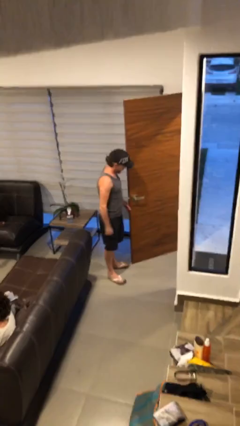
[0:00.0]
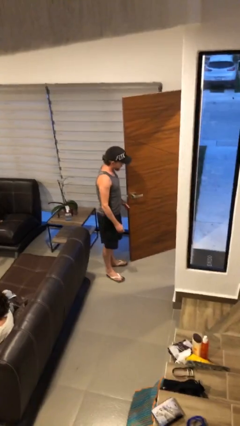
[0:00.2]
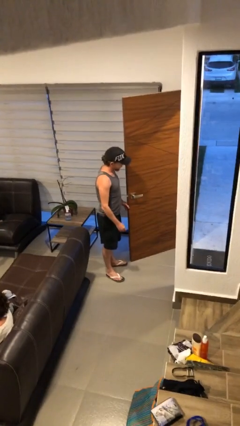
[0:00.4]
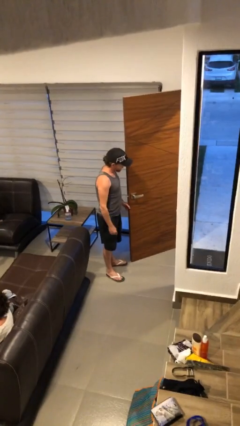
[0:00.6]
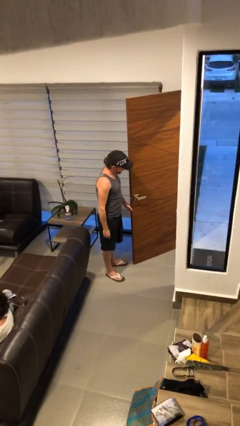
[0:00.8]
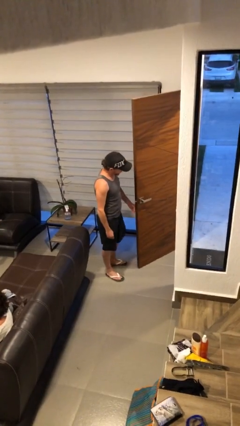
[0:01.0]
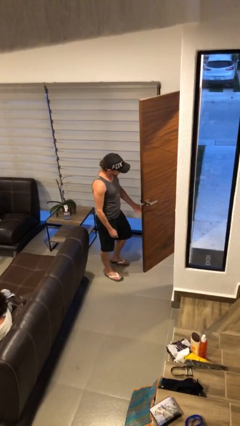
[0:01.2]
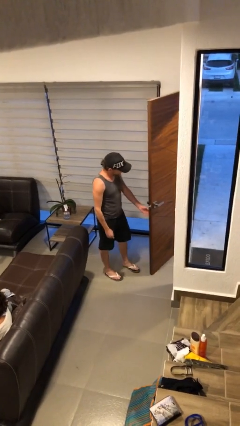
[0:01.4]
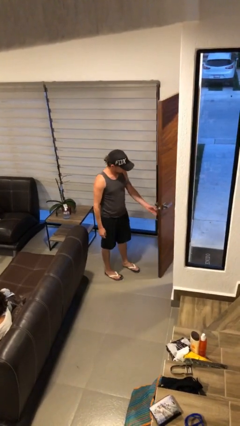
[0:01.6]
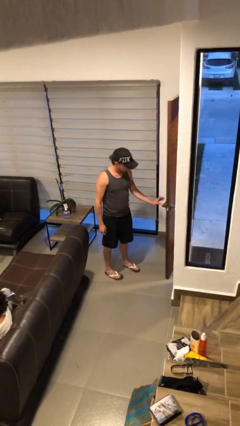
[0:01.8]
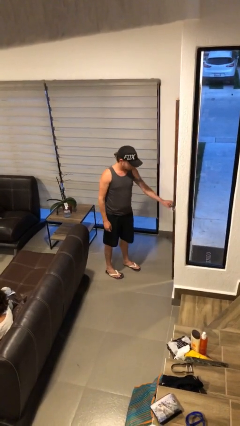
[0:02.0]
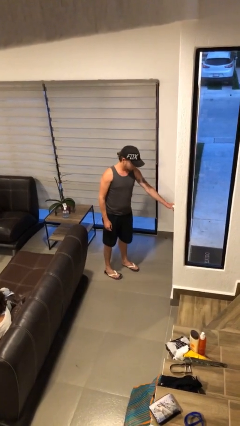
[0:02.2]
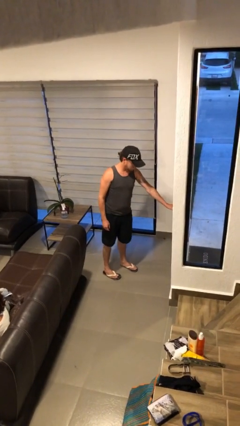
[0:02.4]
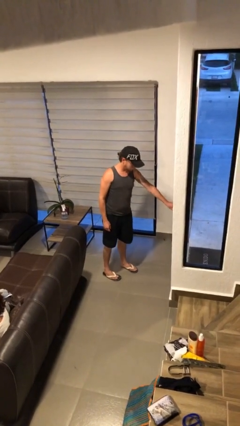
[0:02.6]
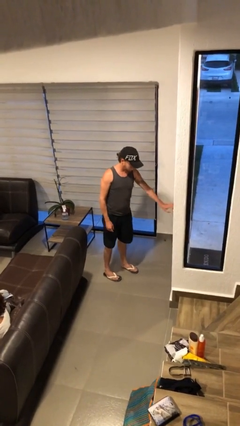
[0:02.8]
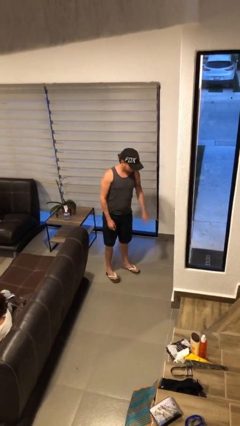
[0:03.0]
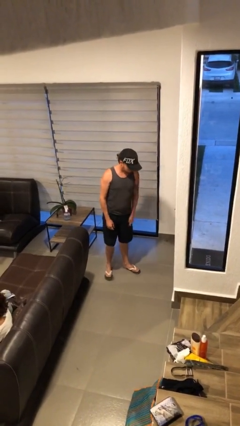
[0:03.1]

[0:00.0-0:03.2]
person closes facility door

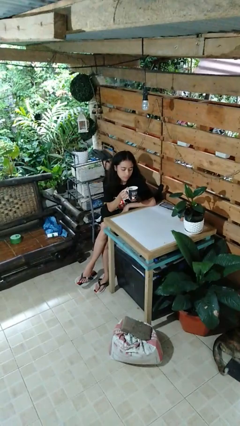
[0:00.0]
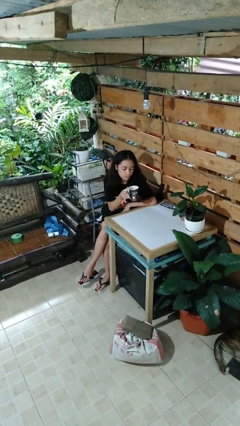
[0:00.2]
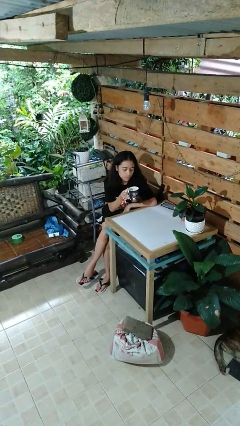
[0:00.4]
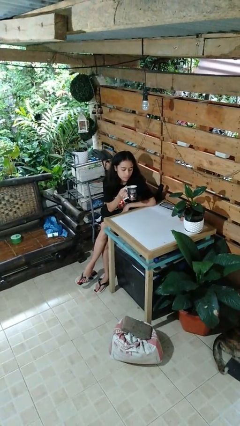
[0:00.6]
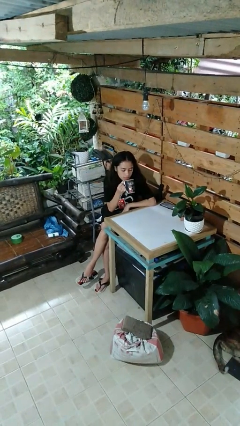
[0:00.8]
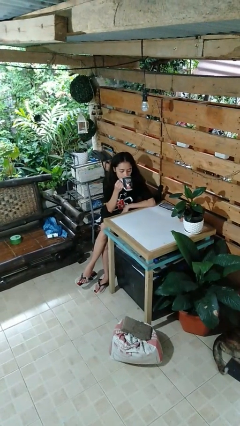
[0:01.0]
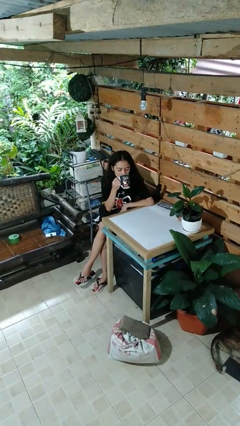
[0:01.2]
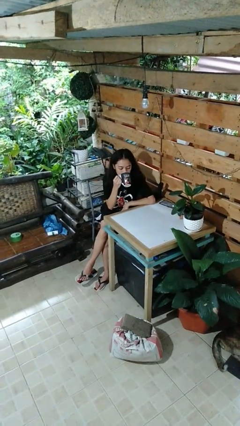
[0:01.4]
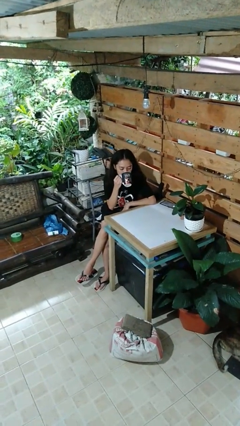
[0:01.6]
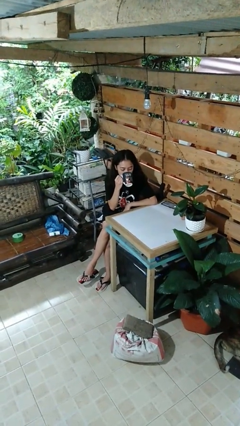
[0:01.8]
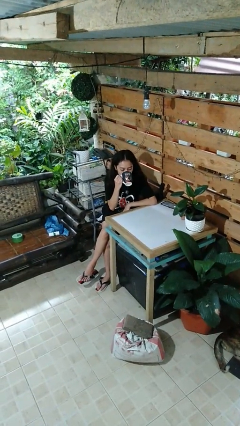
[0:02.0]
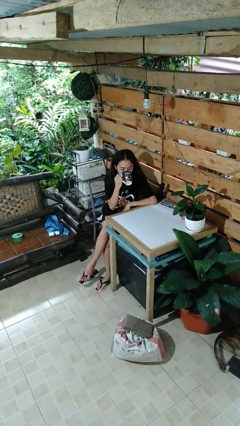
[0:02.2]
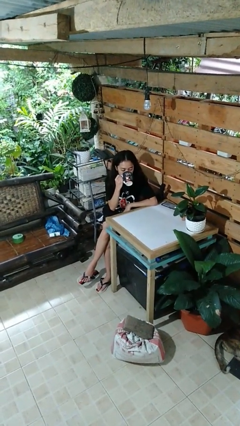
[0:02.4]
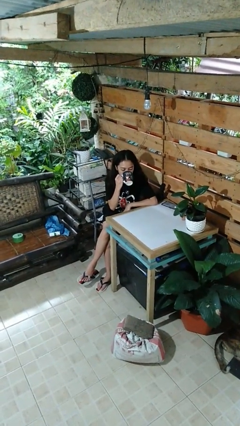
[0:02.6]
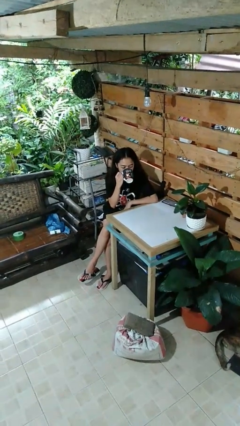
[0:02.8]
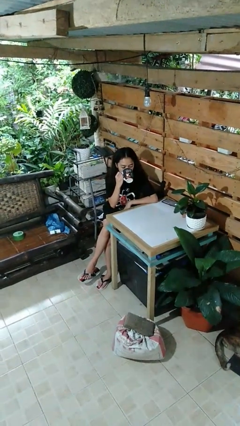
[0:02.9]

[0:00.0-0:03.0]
person drinks from mug

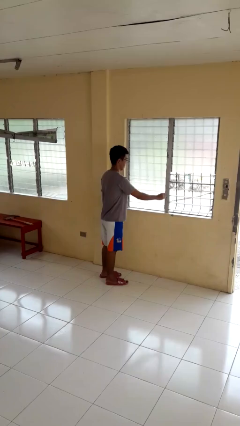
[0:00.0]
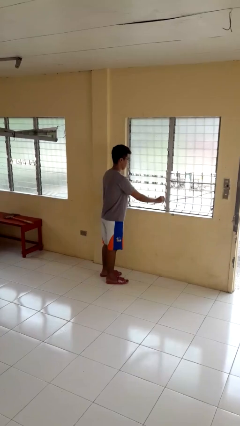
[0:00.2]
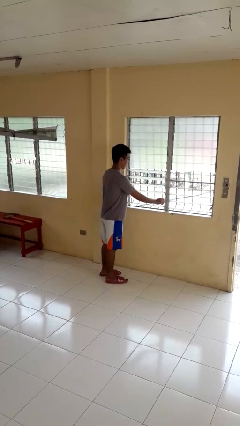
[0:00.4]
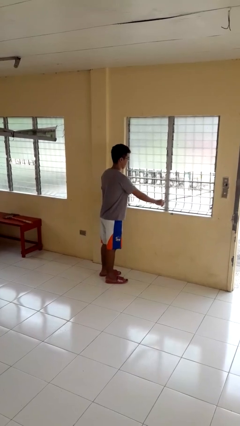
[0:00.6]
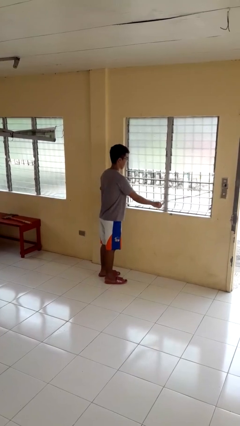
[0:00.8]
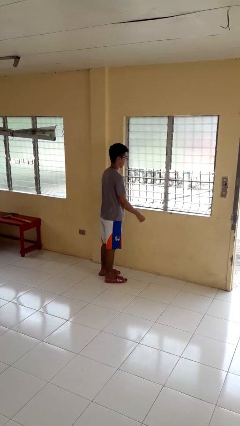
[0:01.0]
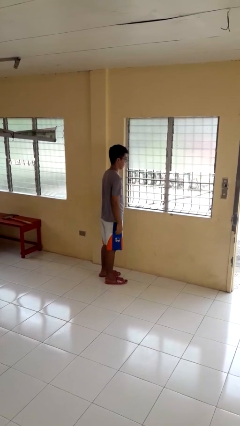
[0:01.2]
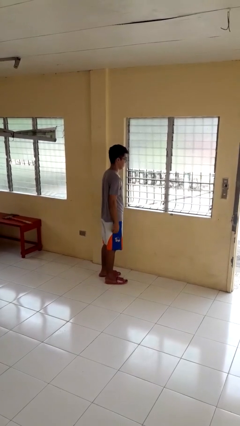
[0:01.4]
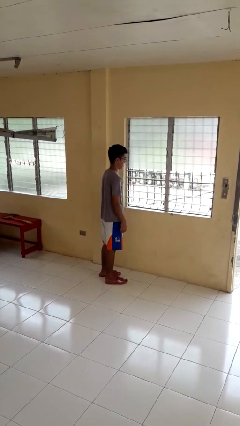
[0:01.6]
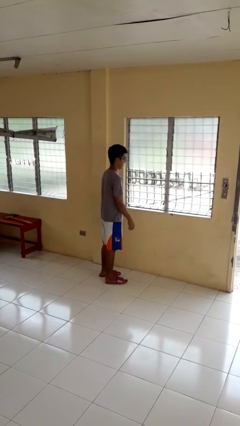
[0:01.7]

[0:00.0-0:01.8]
person opens home window

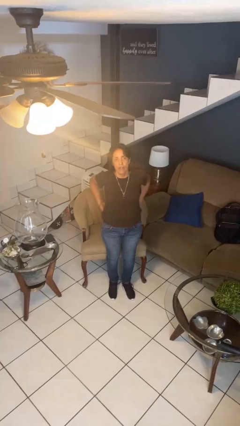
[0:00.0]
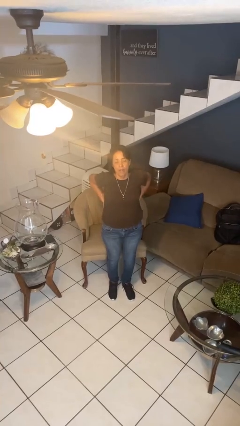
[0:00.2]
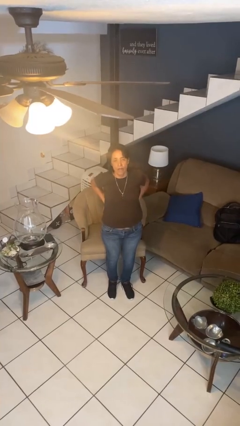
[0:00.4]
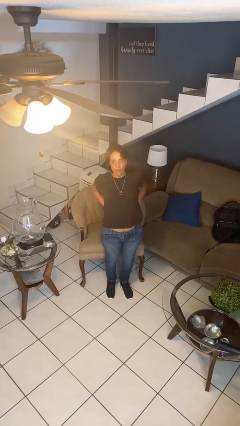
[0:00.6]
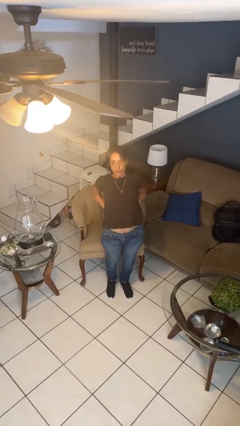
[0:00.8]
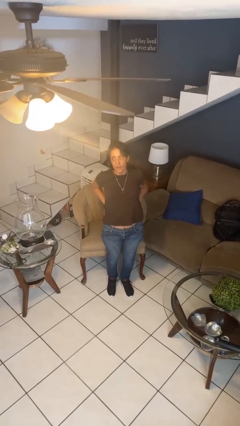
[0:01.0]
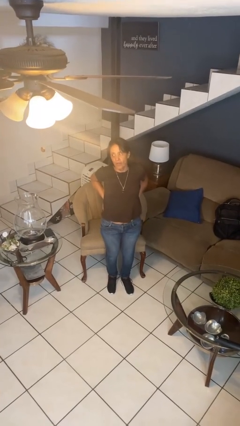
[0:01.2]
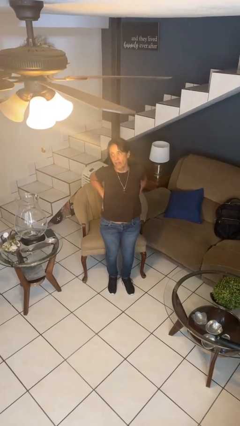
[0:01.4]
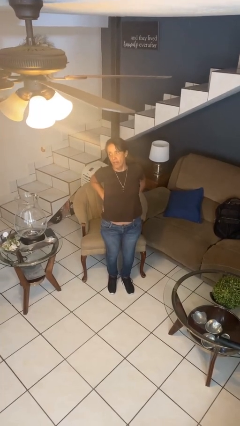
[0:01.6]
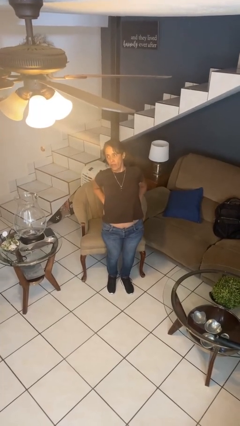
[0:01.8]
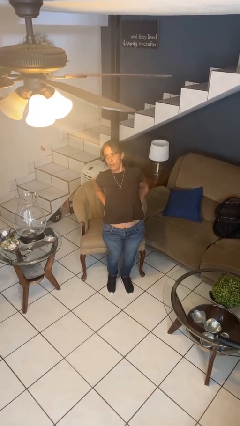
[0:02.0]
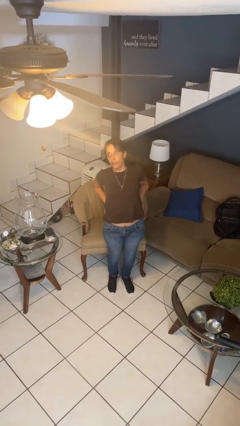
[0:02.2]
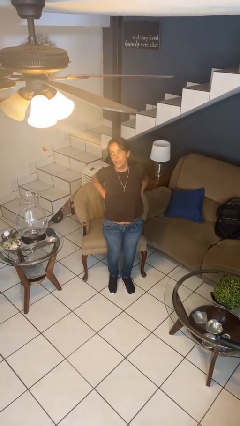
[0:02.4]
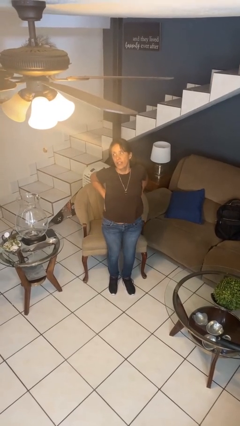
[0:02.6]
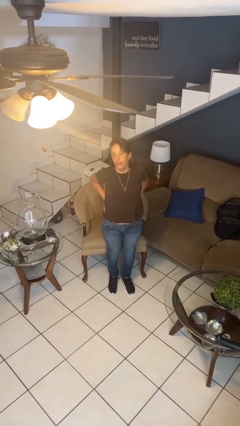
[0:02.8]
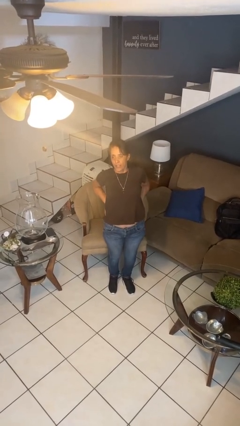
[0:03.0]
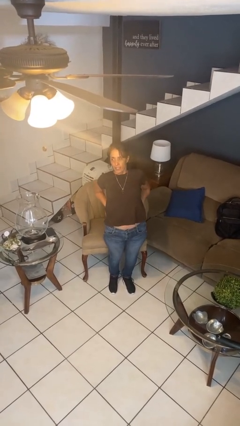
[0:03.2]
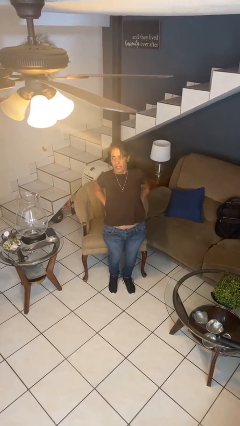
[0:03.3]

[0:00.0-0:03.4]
person stretches back

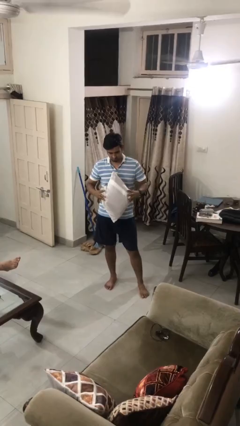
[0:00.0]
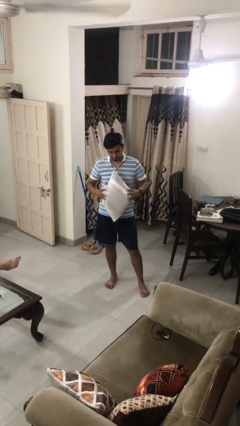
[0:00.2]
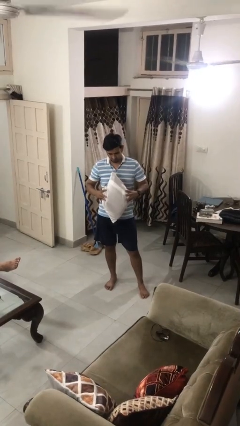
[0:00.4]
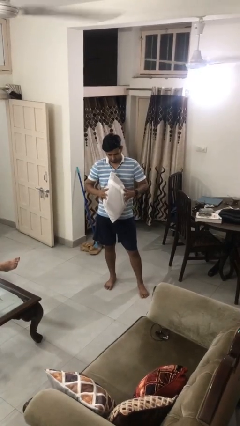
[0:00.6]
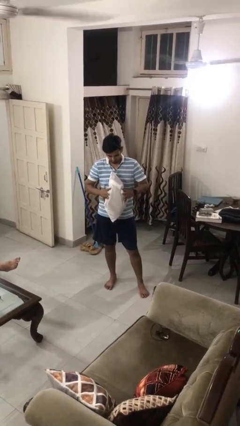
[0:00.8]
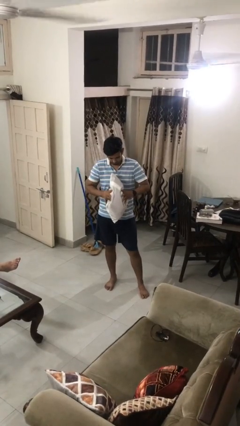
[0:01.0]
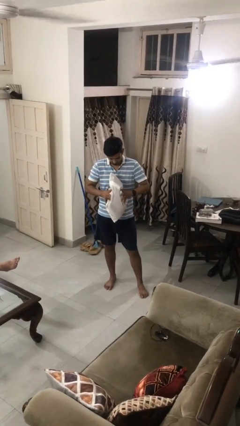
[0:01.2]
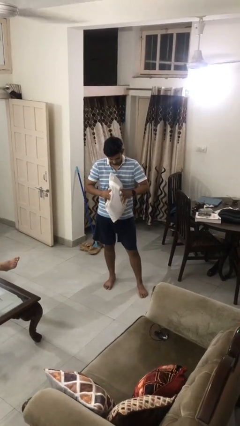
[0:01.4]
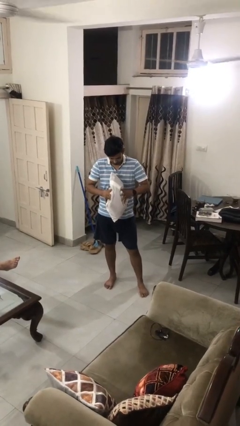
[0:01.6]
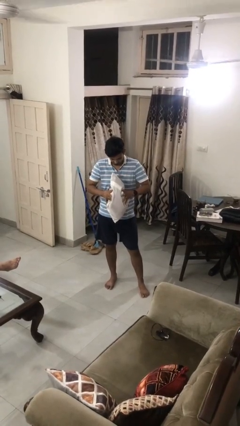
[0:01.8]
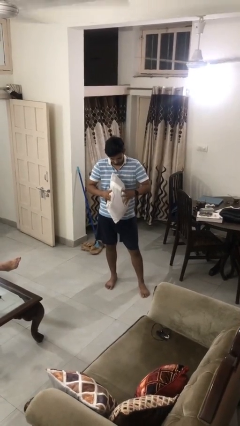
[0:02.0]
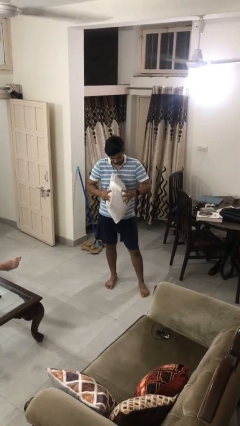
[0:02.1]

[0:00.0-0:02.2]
person squeezes object

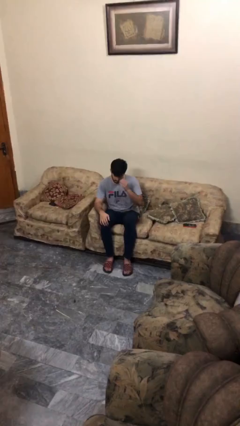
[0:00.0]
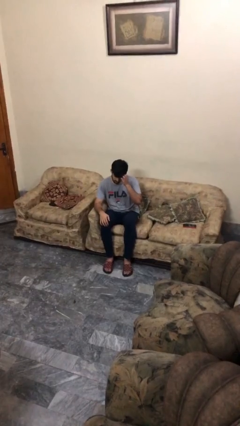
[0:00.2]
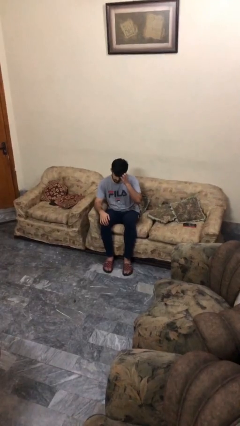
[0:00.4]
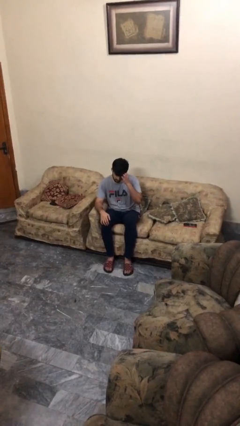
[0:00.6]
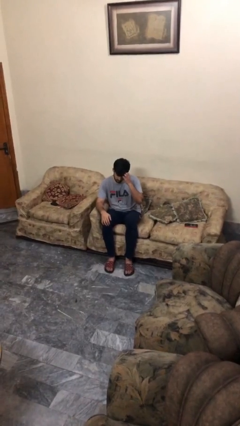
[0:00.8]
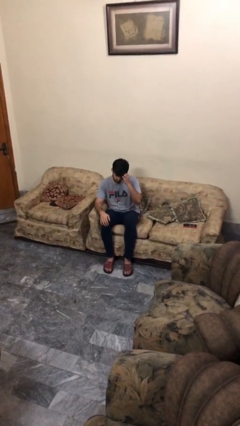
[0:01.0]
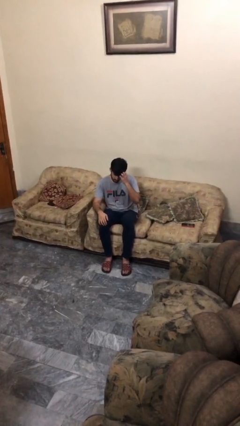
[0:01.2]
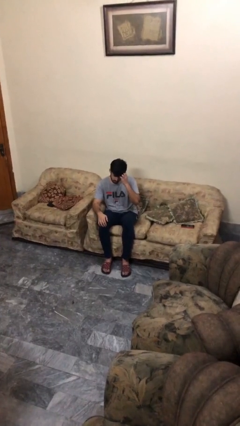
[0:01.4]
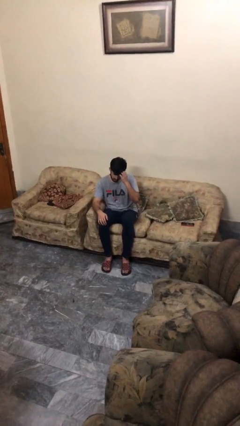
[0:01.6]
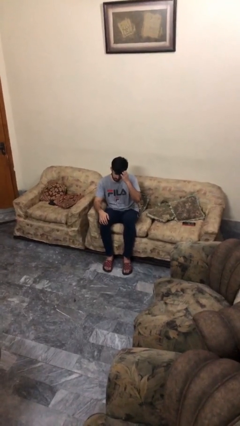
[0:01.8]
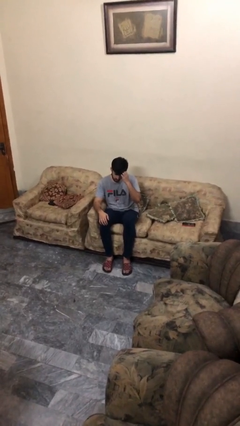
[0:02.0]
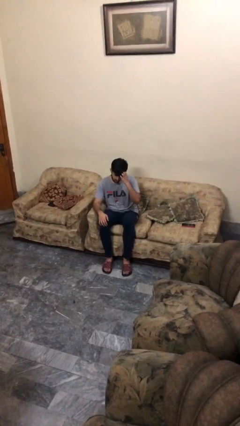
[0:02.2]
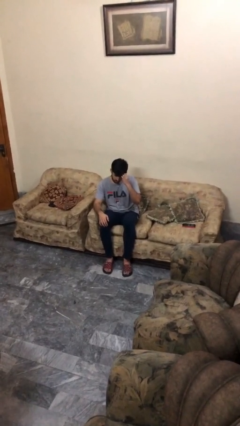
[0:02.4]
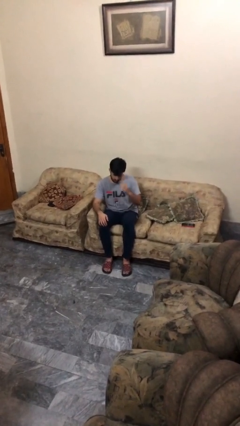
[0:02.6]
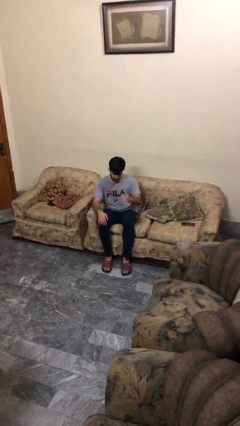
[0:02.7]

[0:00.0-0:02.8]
person scratches face

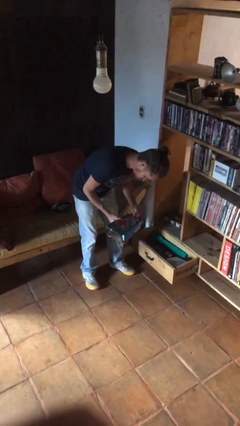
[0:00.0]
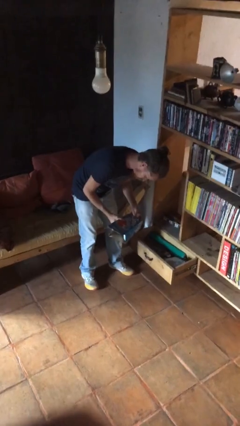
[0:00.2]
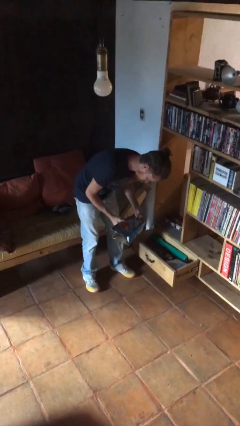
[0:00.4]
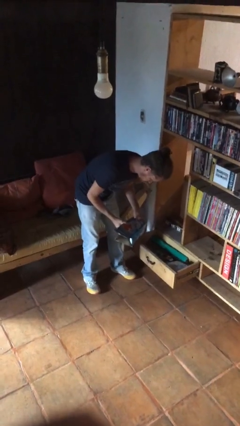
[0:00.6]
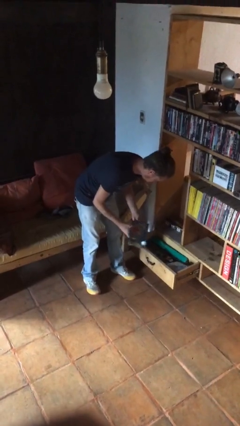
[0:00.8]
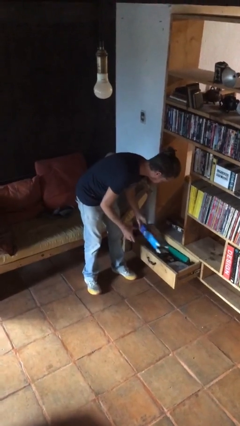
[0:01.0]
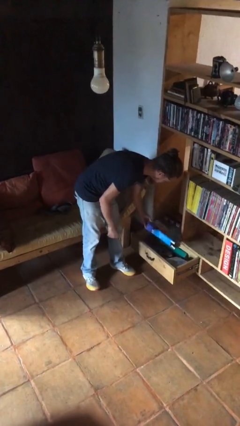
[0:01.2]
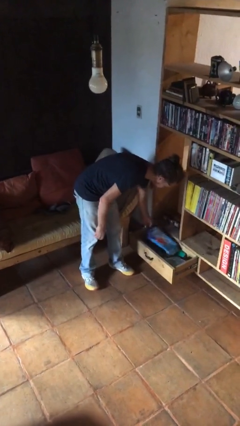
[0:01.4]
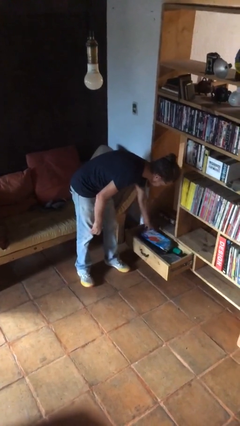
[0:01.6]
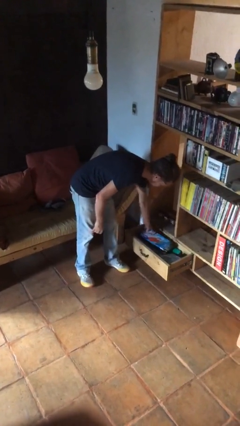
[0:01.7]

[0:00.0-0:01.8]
person puts down object into cabinet
